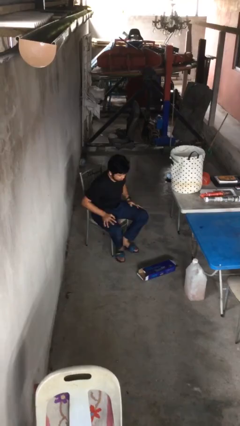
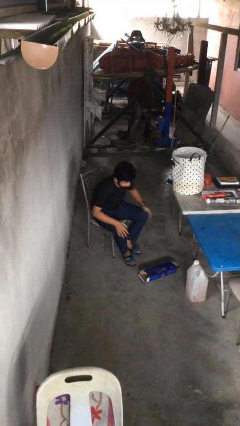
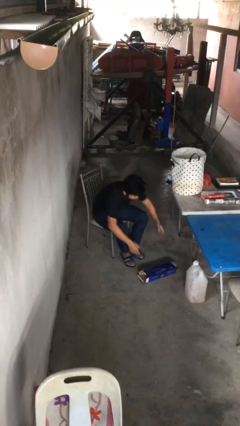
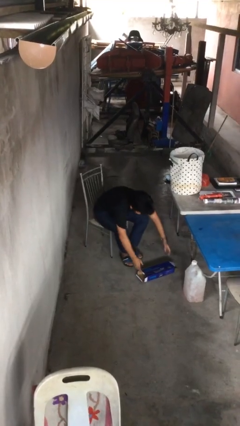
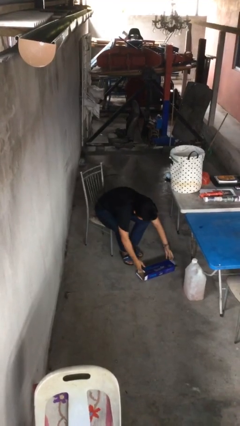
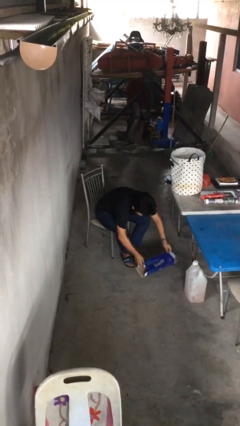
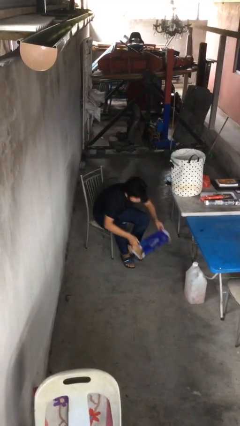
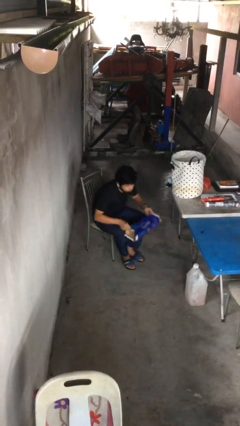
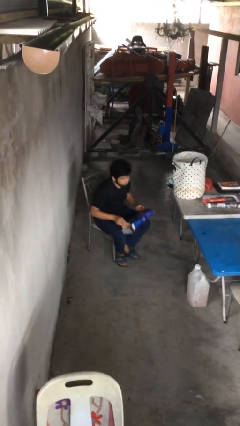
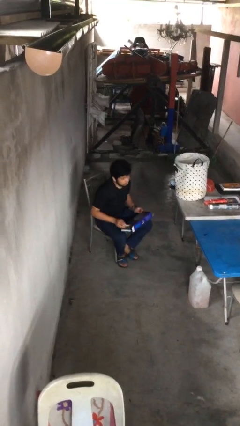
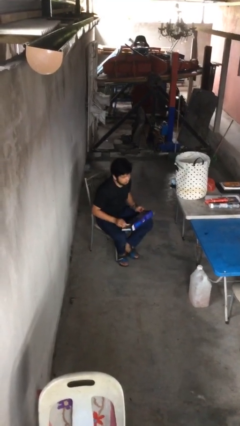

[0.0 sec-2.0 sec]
person picks up object from floor

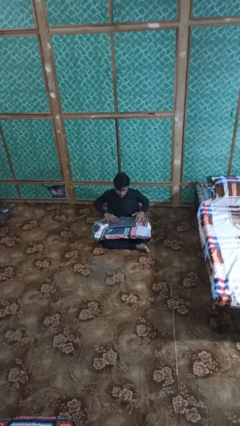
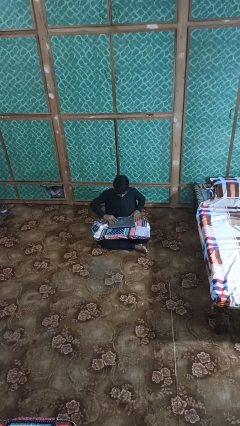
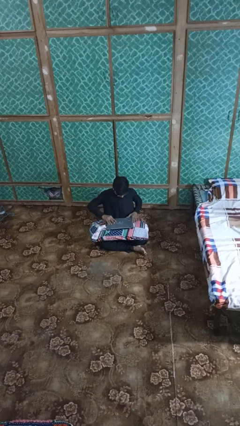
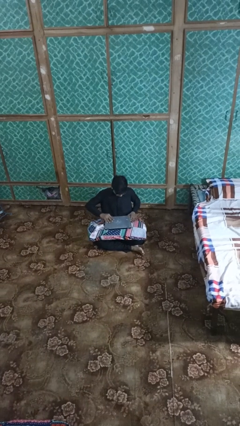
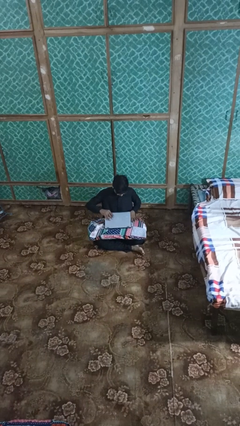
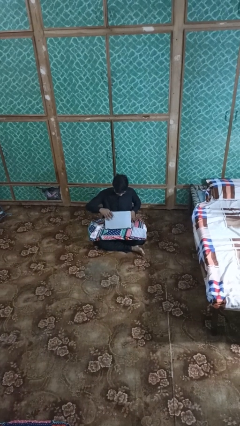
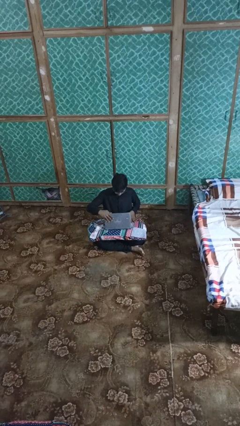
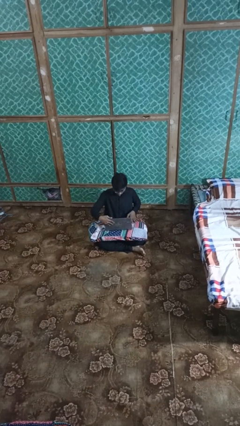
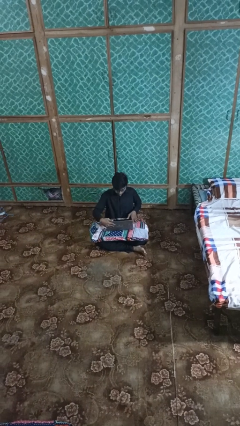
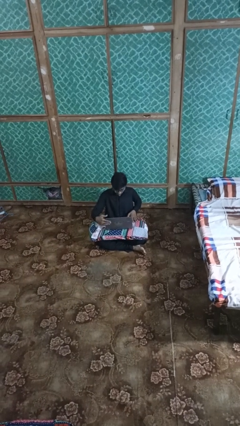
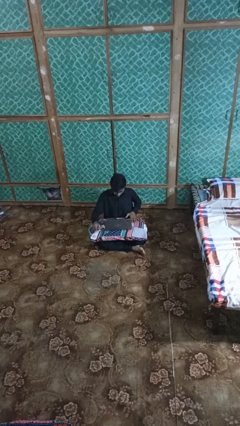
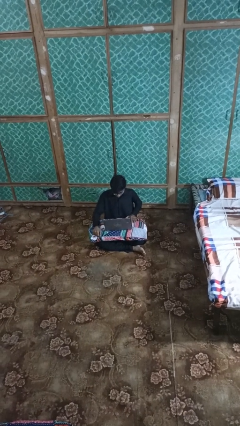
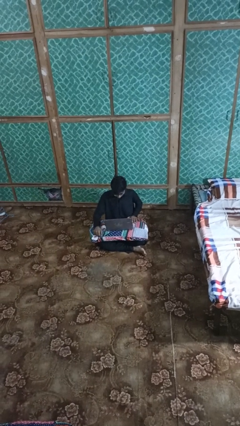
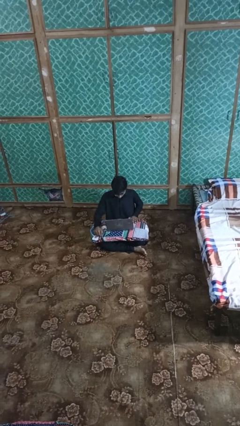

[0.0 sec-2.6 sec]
person opens laptop

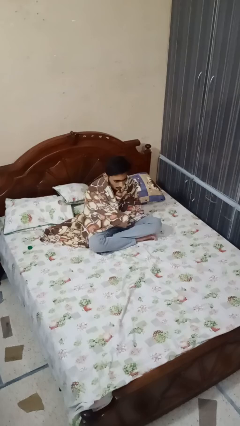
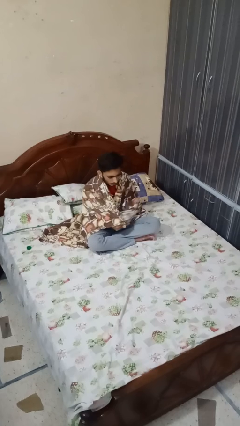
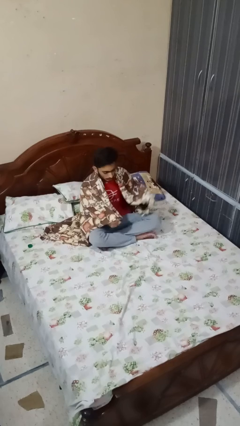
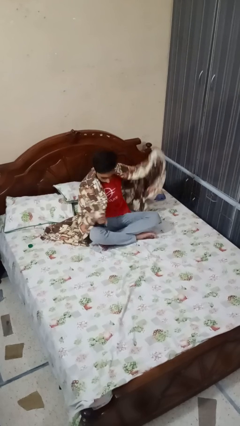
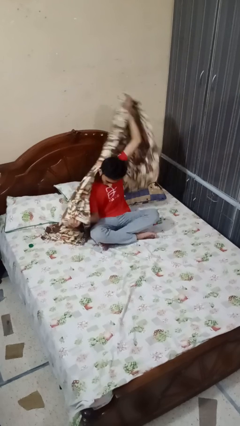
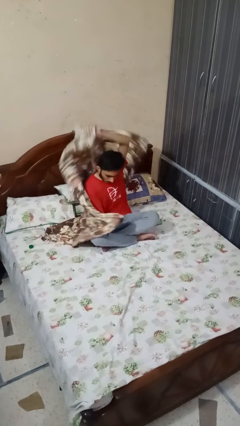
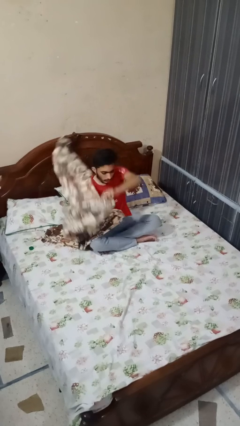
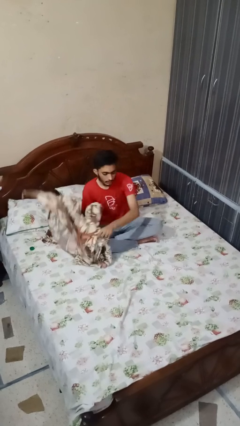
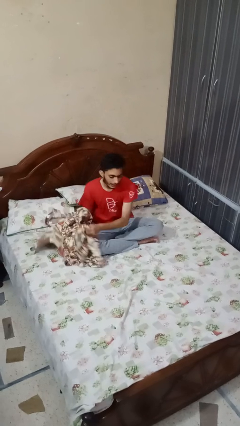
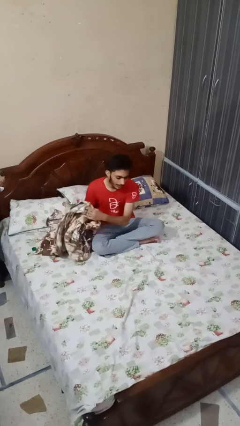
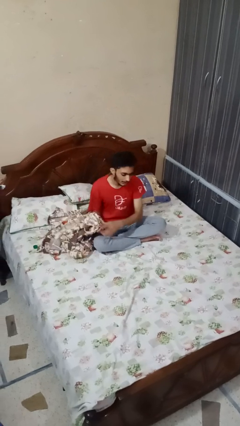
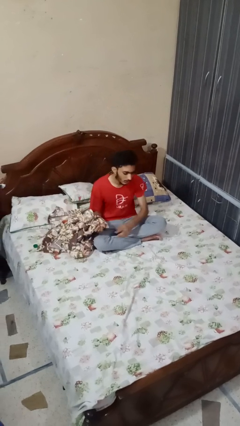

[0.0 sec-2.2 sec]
person uncovers with blanket

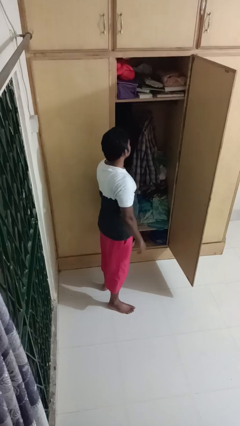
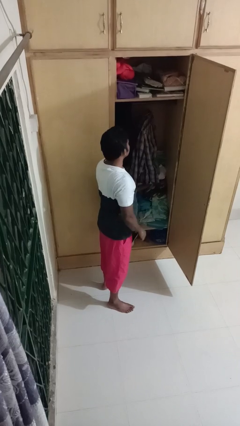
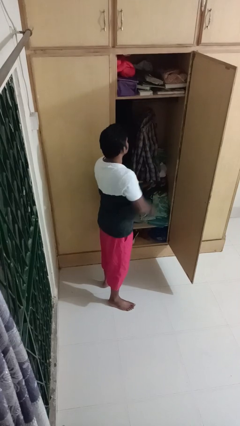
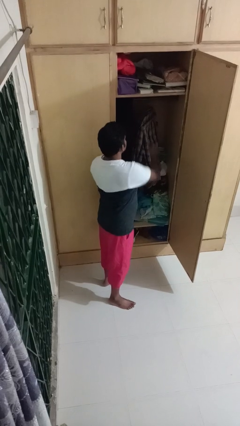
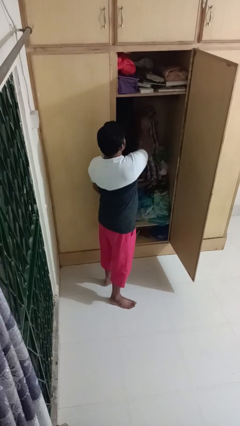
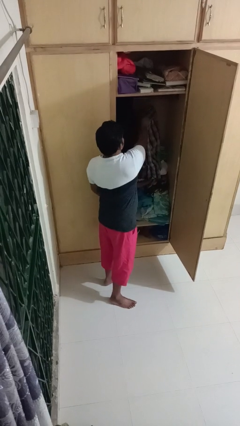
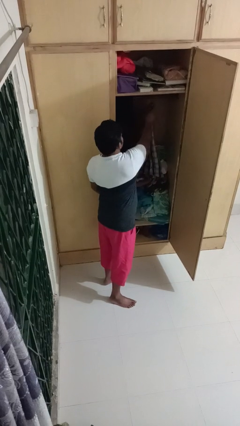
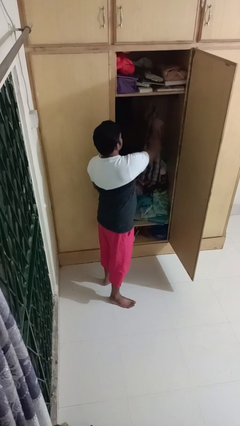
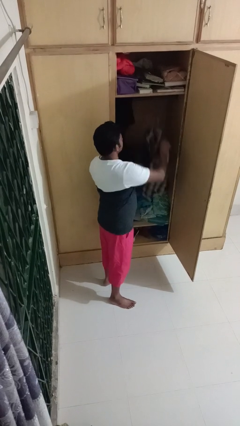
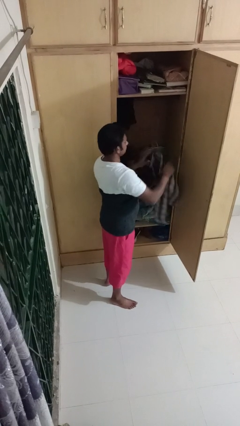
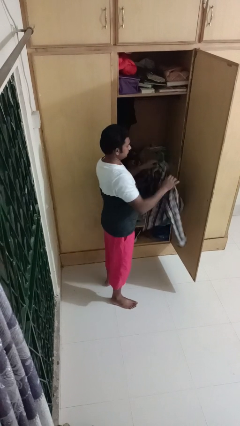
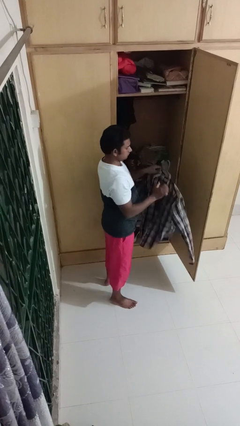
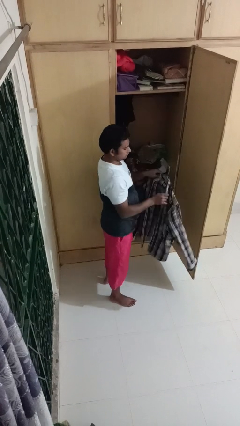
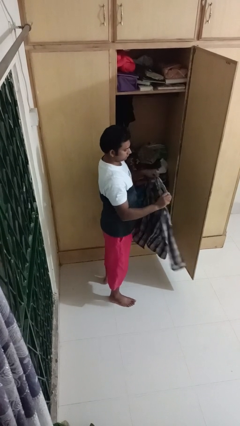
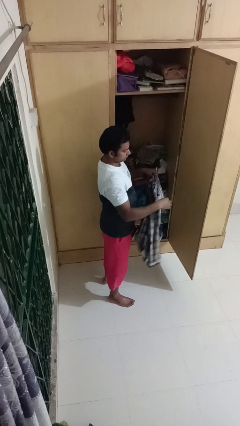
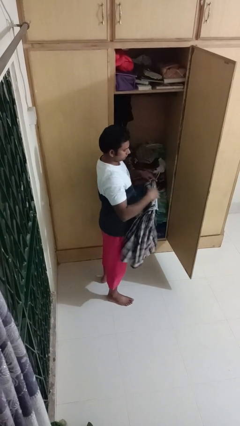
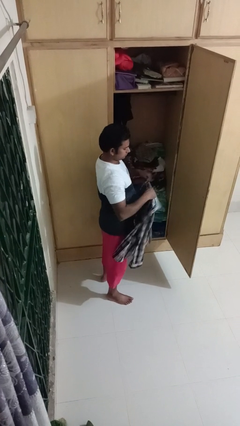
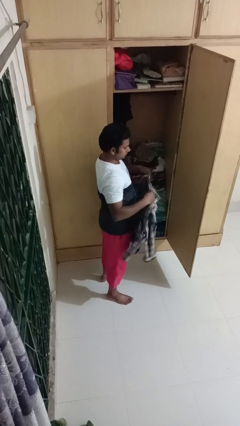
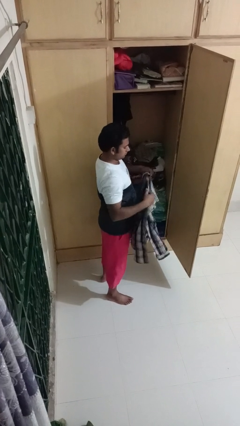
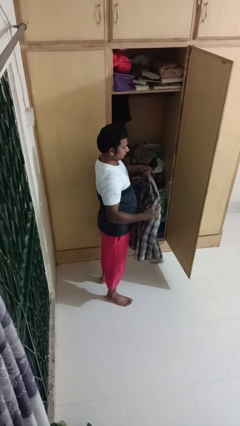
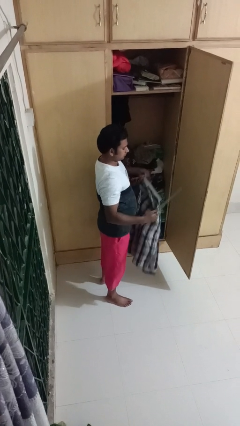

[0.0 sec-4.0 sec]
person takes clothes from closet

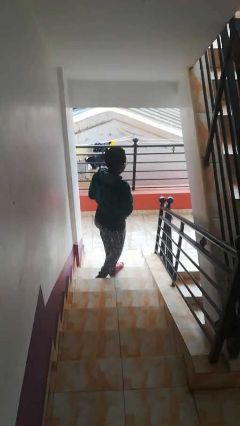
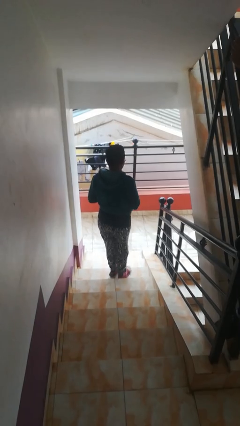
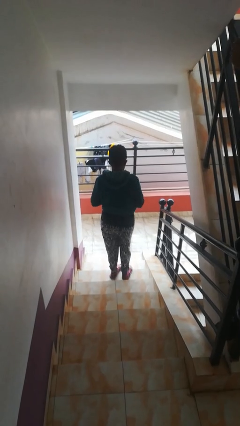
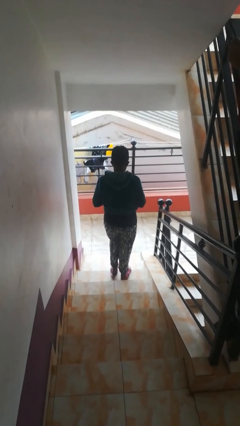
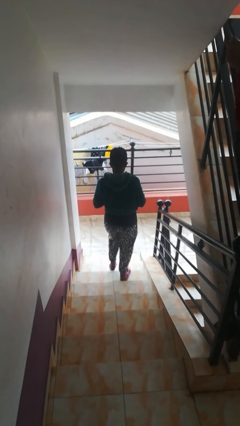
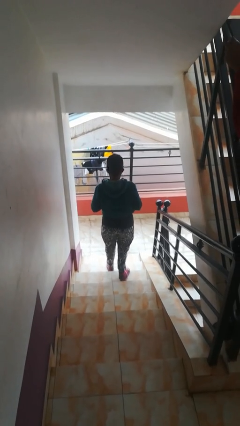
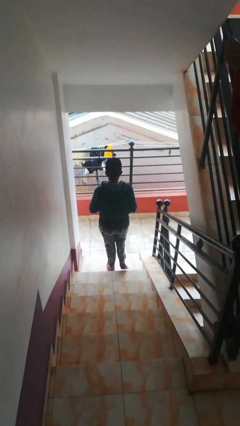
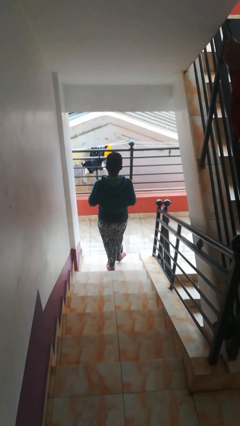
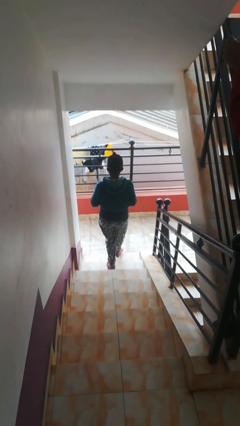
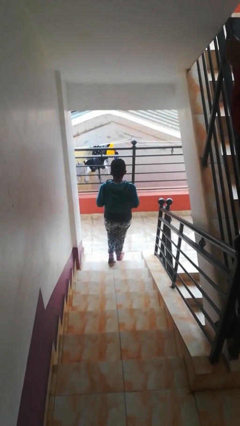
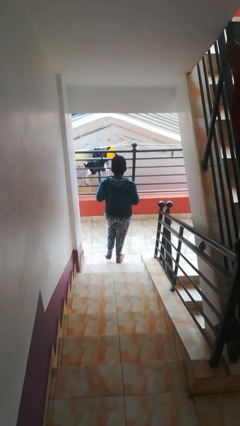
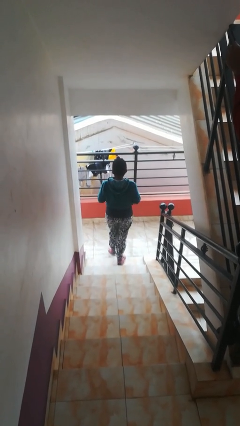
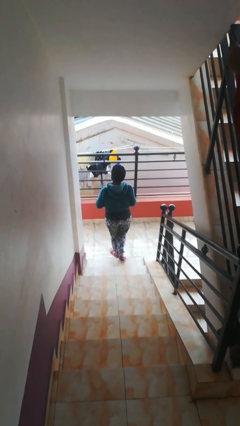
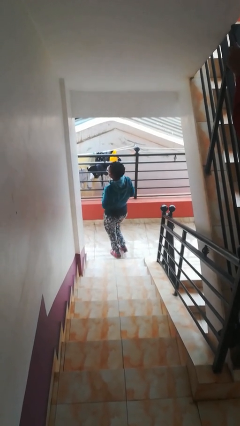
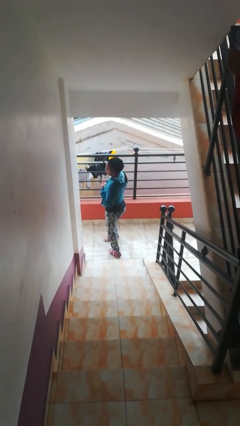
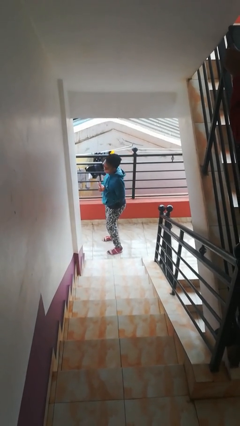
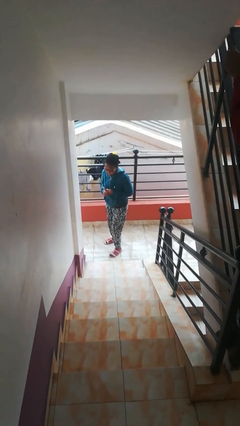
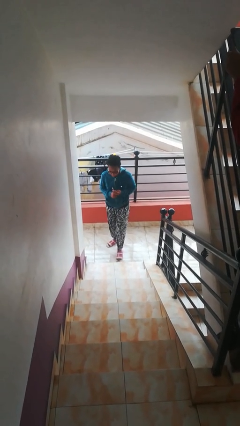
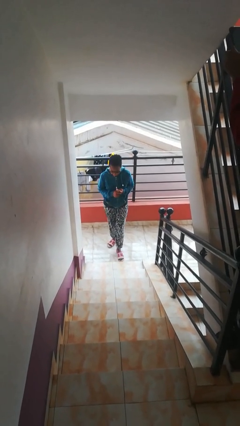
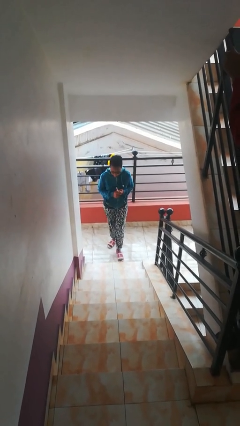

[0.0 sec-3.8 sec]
person climbs down stairs

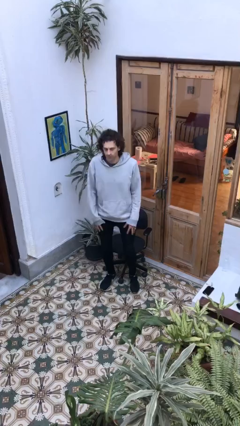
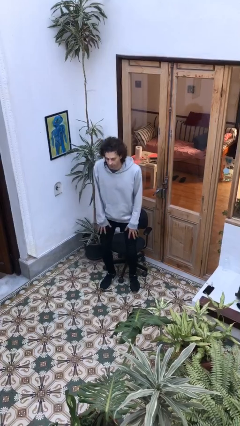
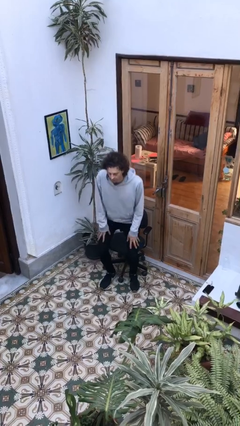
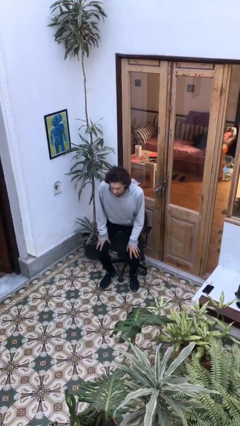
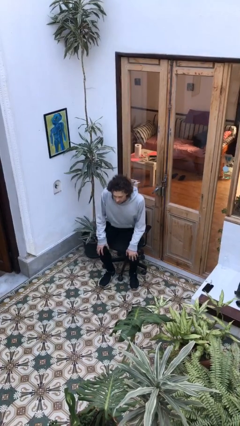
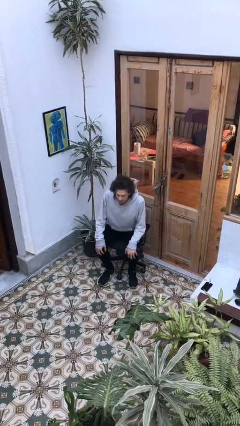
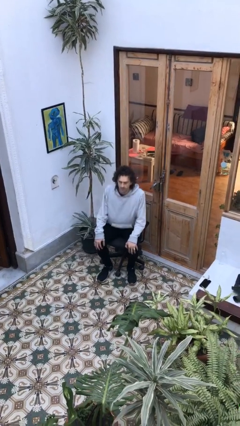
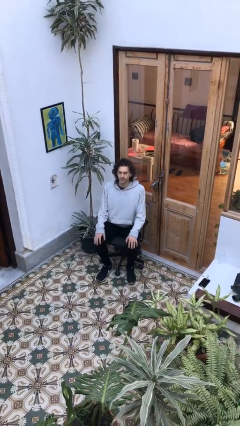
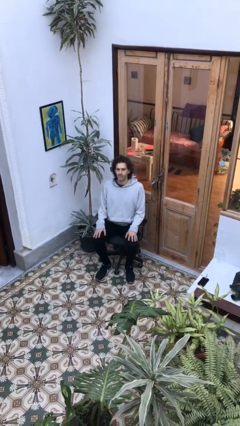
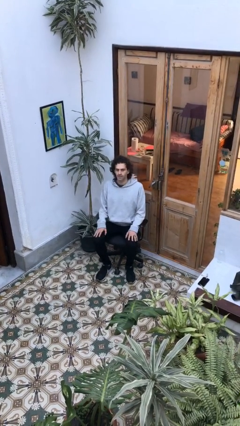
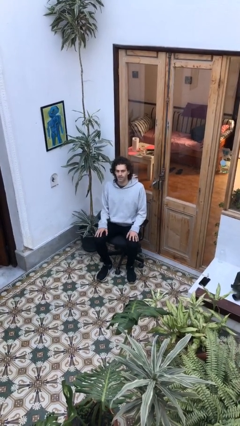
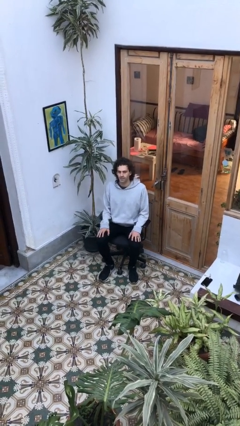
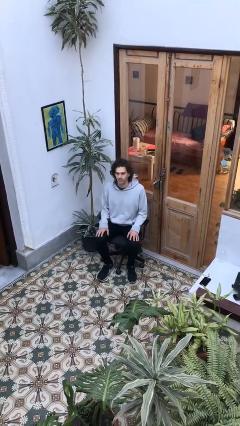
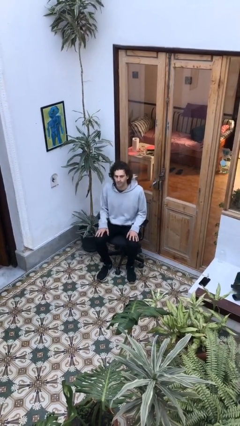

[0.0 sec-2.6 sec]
person sits down
